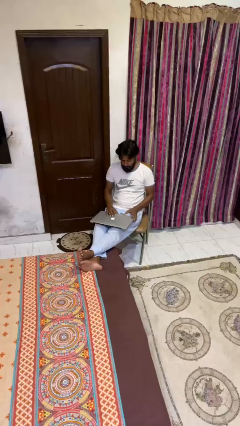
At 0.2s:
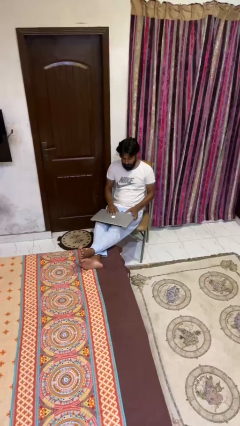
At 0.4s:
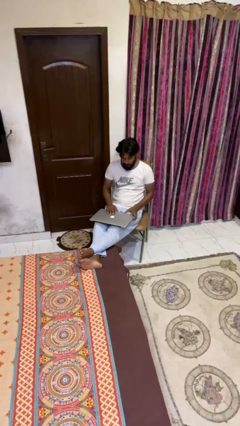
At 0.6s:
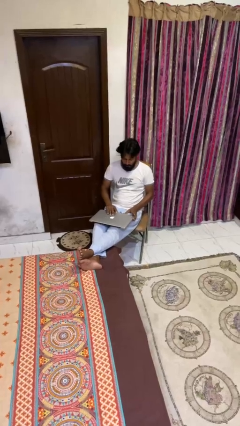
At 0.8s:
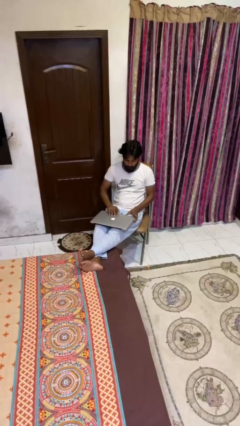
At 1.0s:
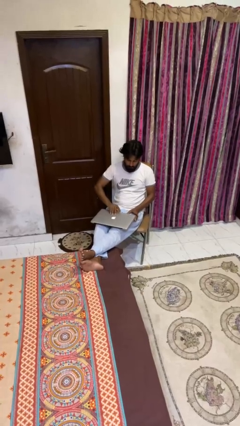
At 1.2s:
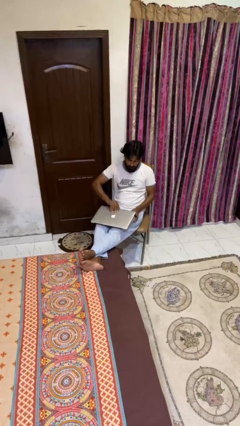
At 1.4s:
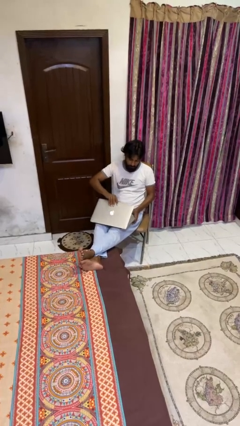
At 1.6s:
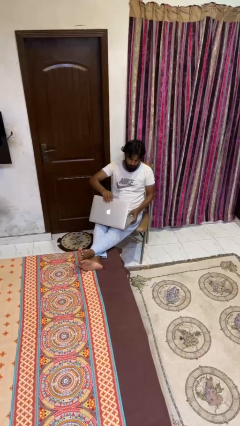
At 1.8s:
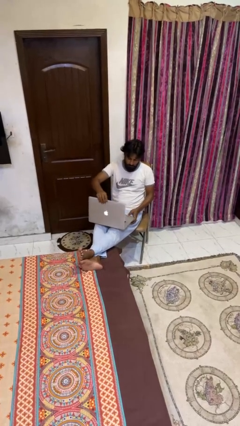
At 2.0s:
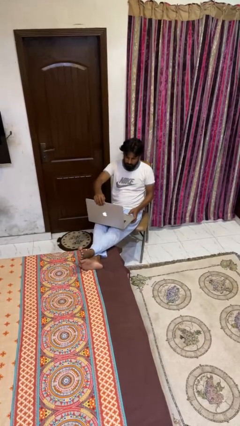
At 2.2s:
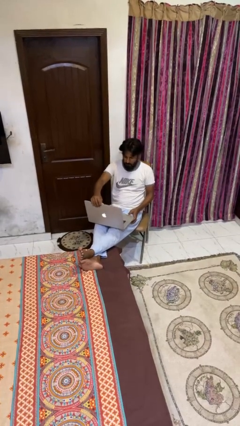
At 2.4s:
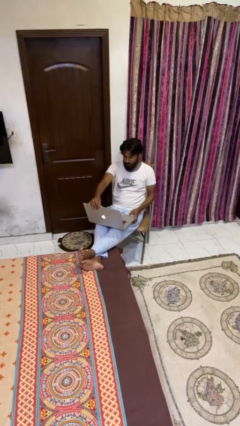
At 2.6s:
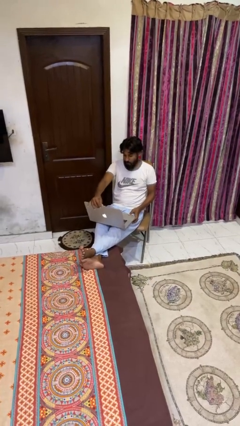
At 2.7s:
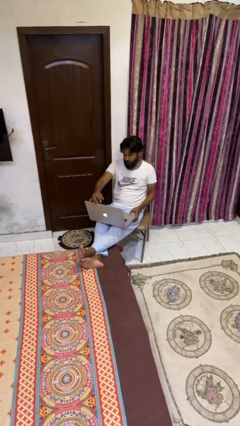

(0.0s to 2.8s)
person opens laptop

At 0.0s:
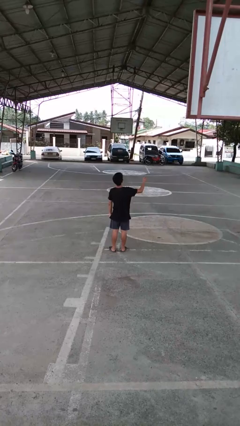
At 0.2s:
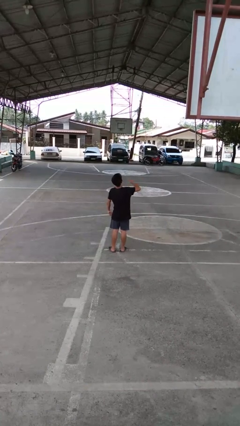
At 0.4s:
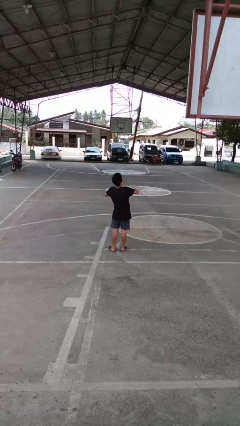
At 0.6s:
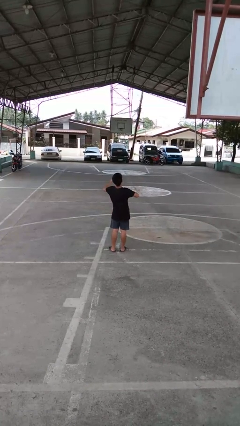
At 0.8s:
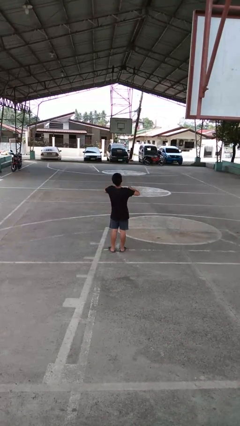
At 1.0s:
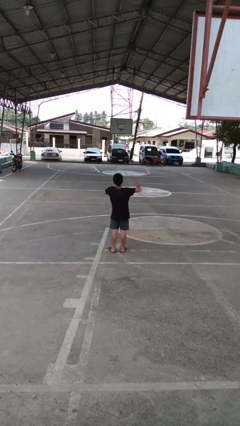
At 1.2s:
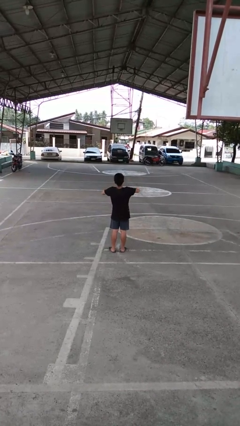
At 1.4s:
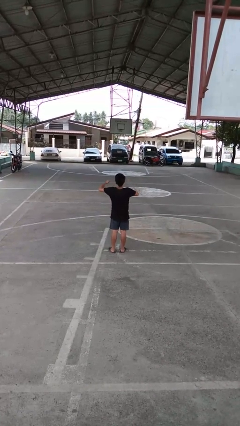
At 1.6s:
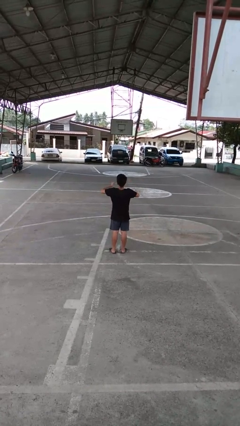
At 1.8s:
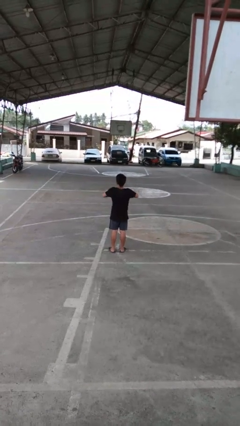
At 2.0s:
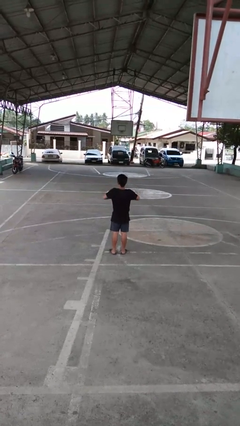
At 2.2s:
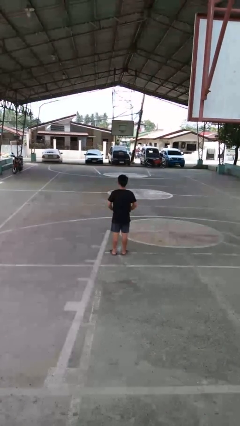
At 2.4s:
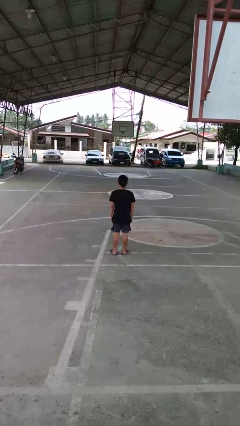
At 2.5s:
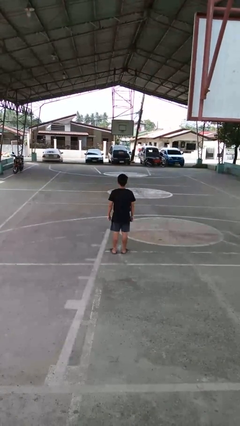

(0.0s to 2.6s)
person drums on chest

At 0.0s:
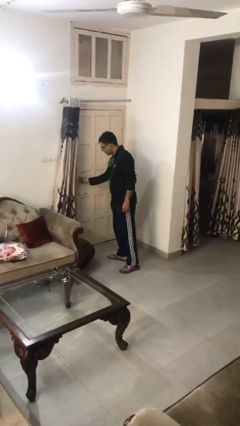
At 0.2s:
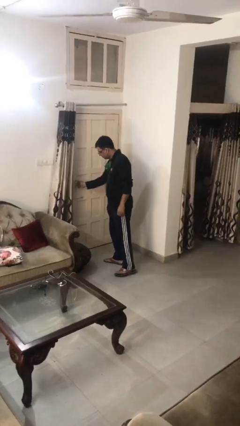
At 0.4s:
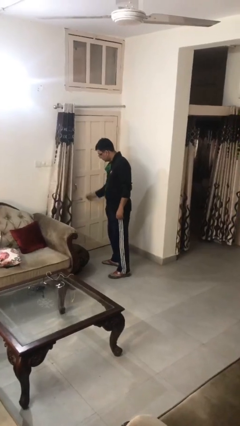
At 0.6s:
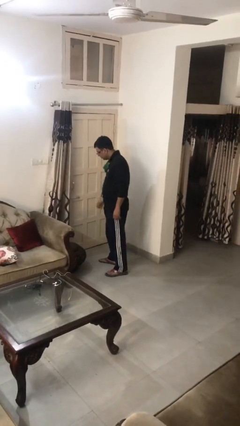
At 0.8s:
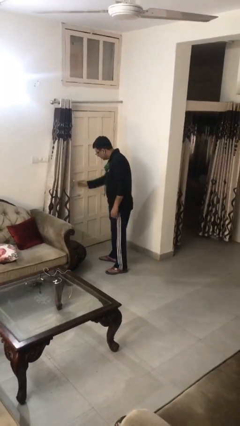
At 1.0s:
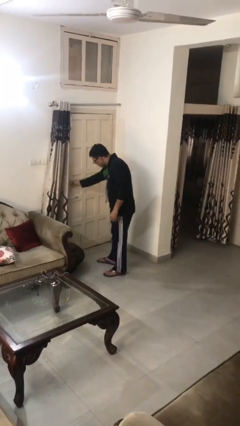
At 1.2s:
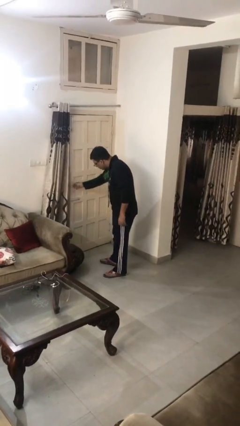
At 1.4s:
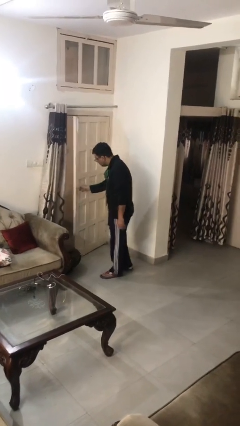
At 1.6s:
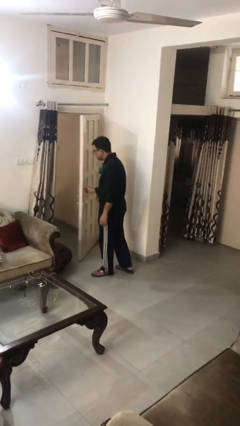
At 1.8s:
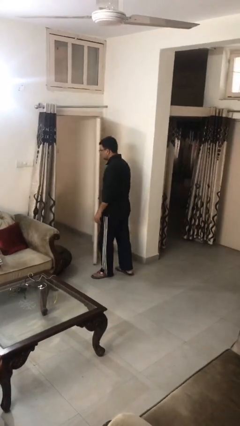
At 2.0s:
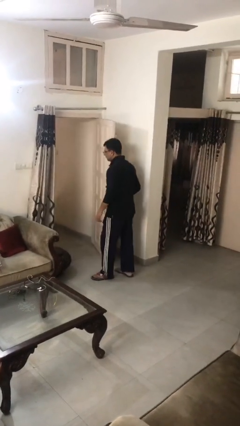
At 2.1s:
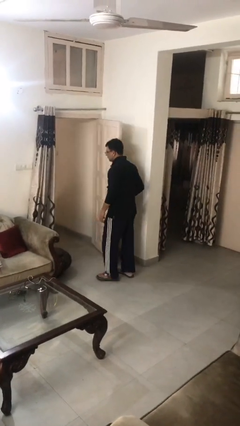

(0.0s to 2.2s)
person opens facility door

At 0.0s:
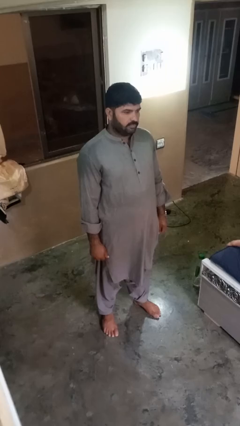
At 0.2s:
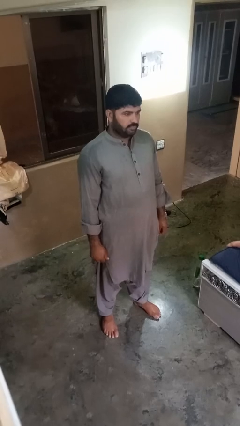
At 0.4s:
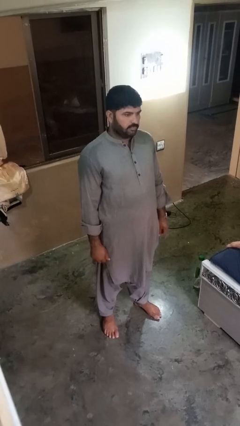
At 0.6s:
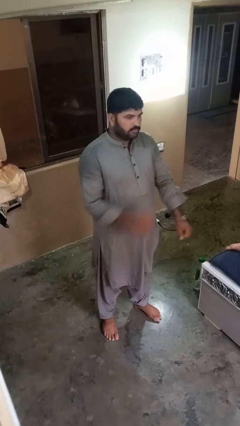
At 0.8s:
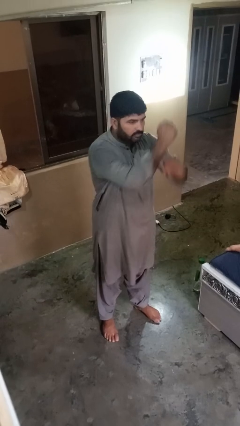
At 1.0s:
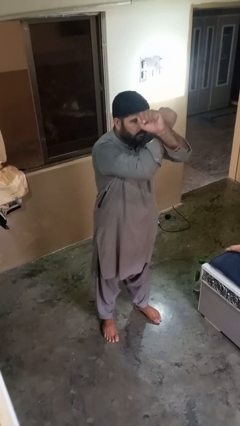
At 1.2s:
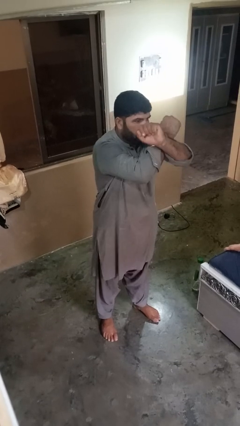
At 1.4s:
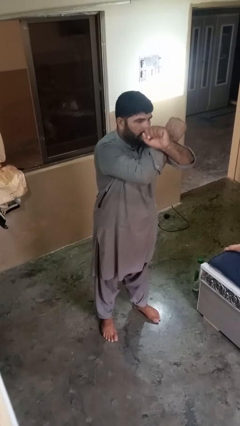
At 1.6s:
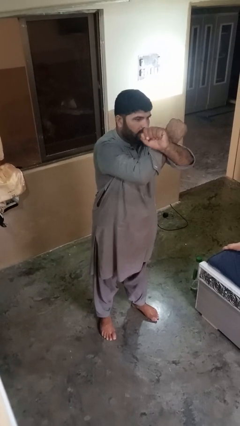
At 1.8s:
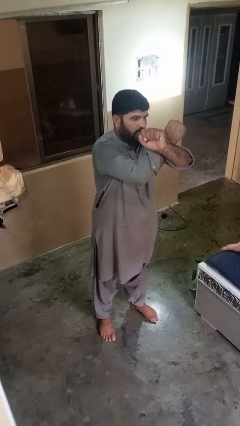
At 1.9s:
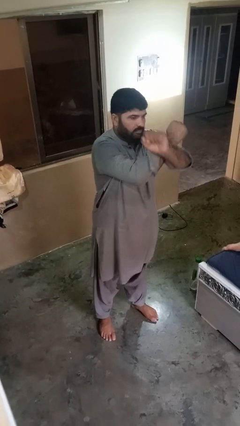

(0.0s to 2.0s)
person gestures arms x

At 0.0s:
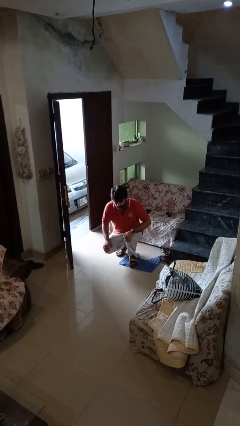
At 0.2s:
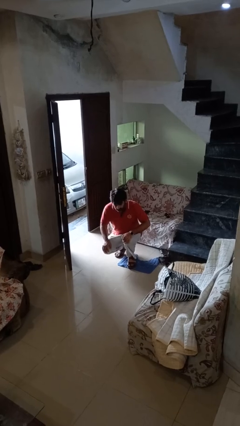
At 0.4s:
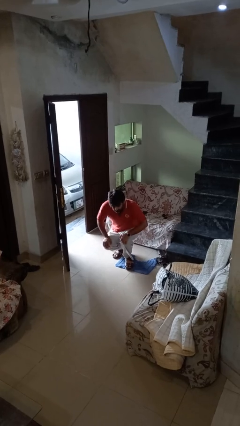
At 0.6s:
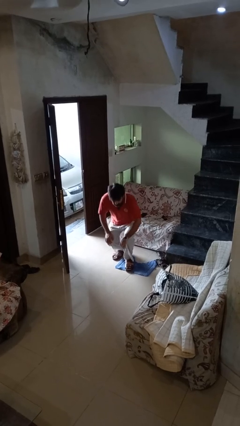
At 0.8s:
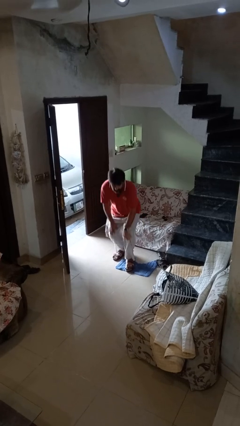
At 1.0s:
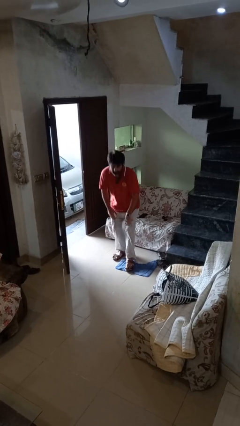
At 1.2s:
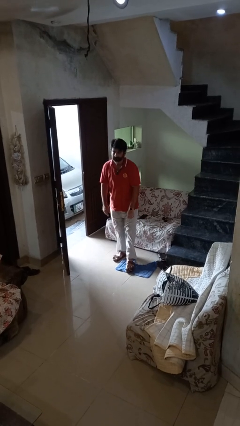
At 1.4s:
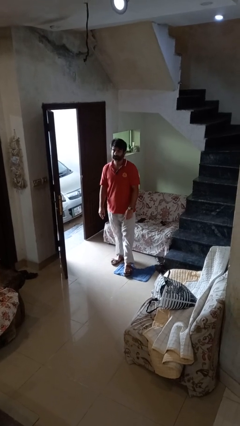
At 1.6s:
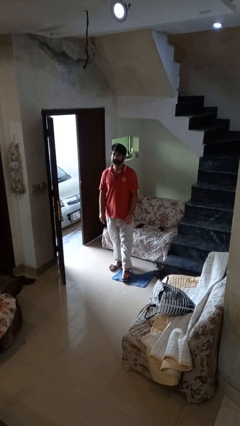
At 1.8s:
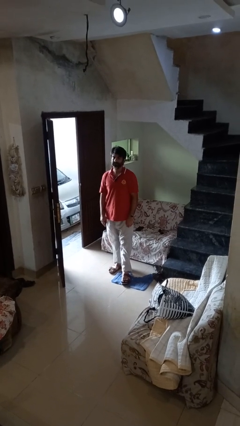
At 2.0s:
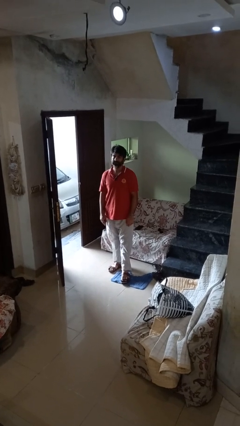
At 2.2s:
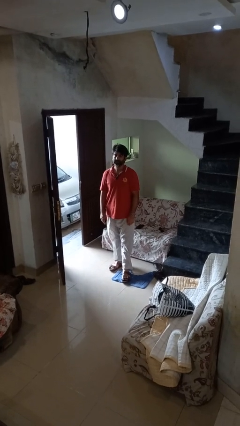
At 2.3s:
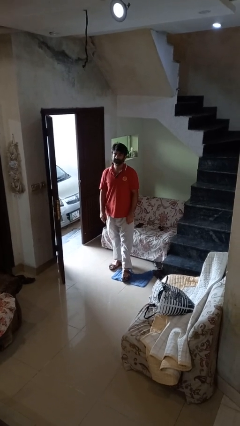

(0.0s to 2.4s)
person stands up

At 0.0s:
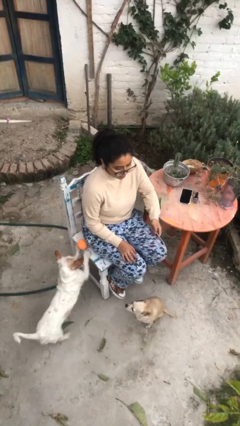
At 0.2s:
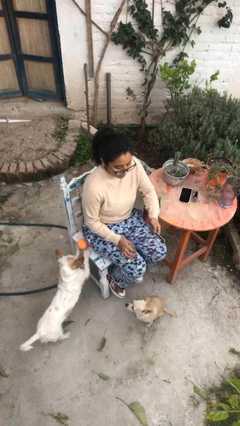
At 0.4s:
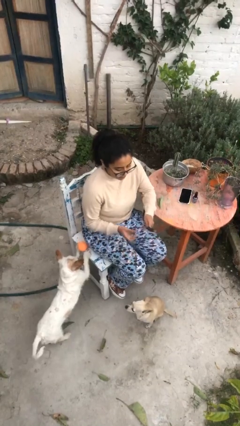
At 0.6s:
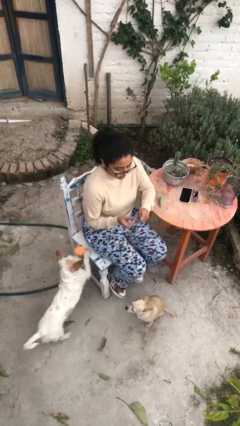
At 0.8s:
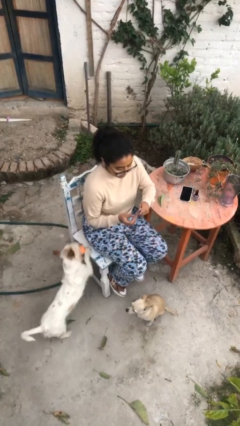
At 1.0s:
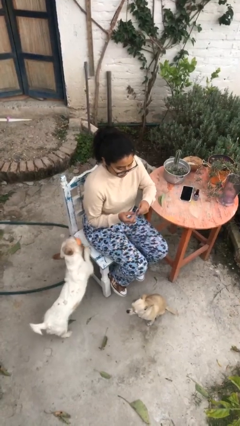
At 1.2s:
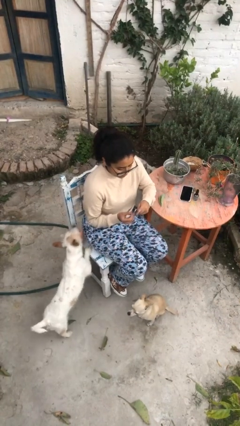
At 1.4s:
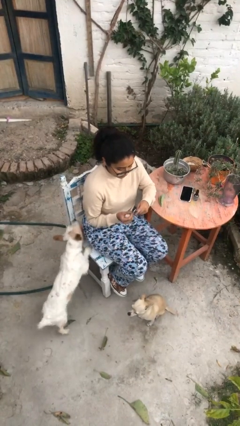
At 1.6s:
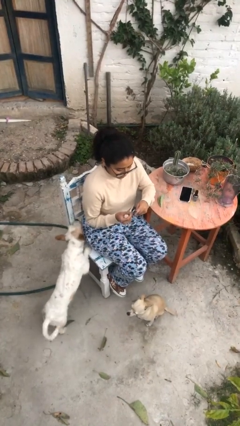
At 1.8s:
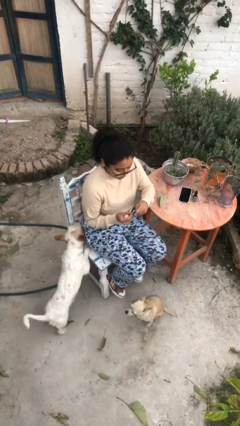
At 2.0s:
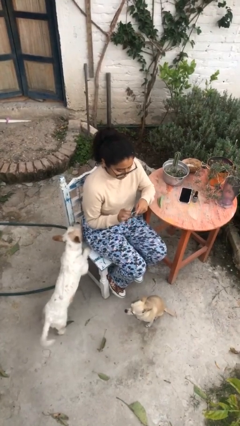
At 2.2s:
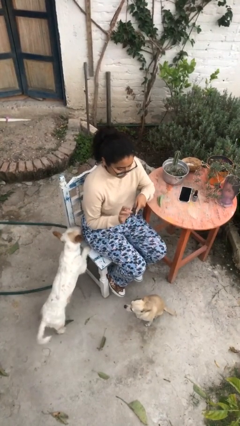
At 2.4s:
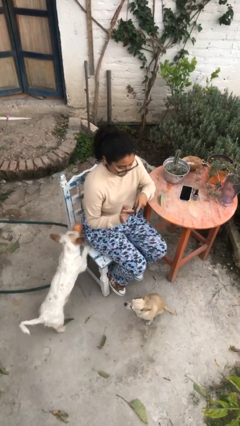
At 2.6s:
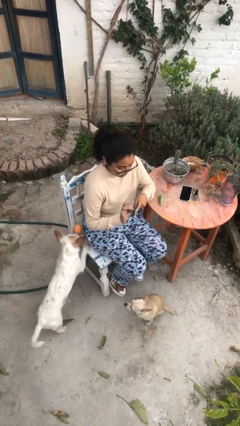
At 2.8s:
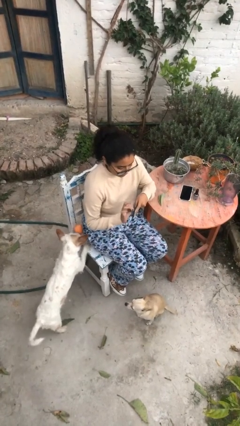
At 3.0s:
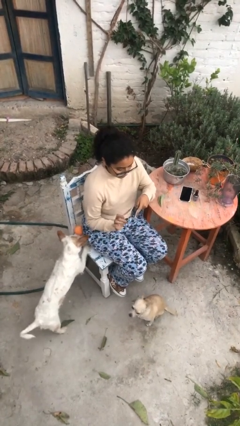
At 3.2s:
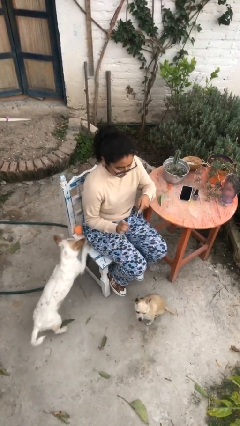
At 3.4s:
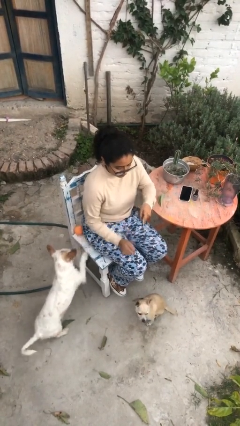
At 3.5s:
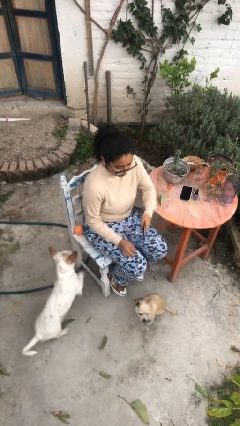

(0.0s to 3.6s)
person files fingernails

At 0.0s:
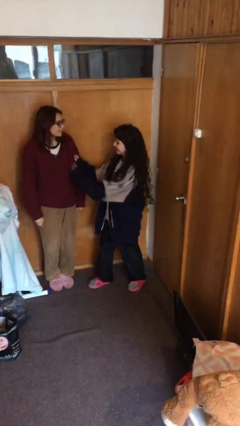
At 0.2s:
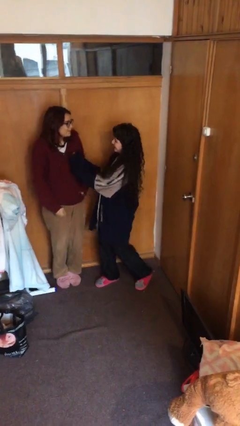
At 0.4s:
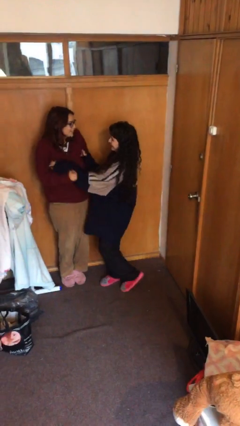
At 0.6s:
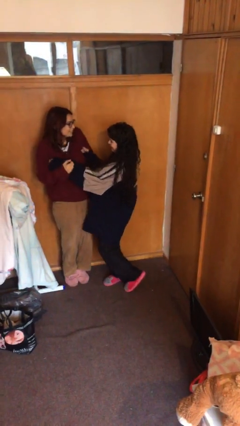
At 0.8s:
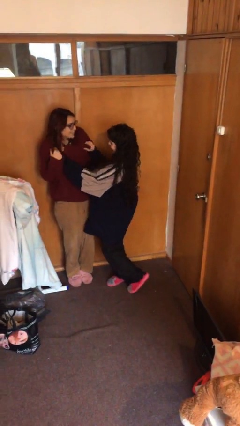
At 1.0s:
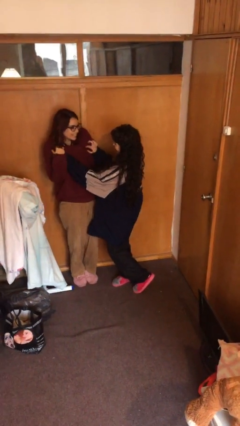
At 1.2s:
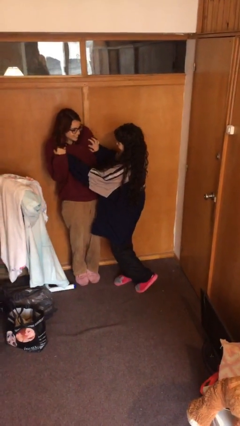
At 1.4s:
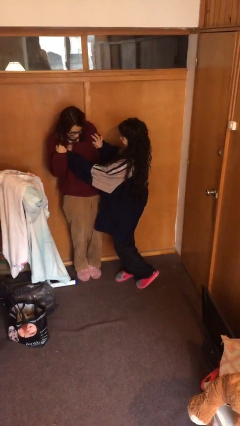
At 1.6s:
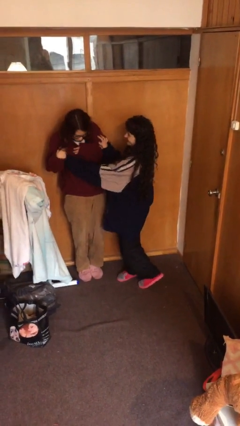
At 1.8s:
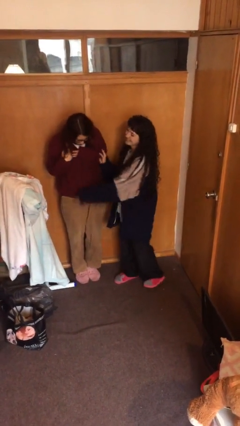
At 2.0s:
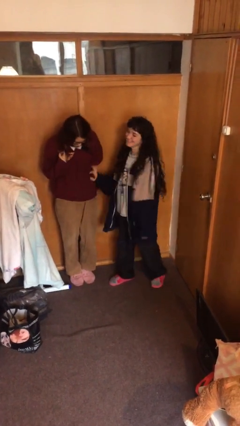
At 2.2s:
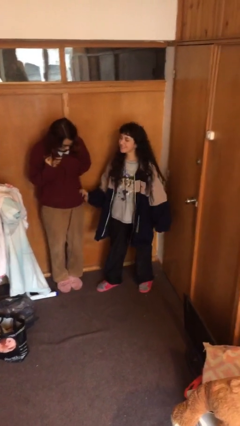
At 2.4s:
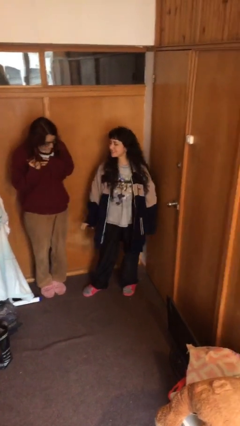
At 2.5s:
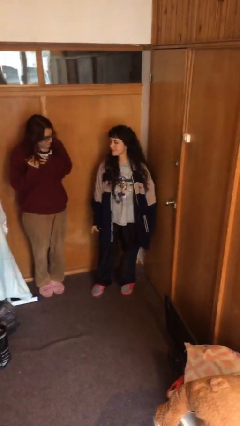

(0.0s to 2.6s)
person tickles person
